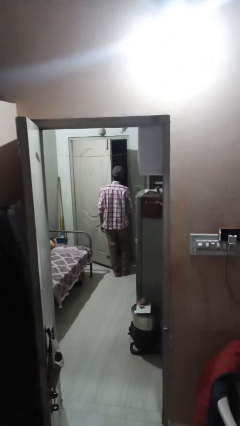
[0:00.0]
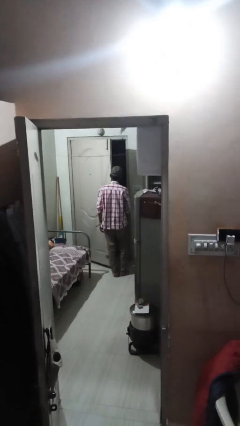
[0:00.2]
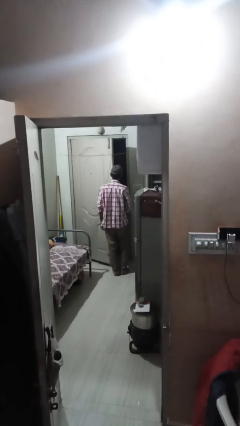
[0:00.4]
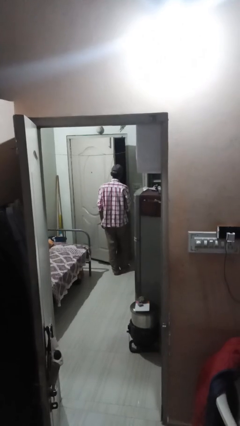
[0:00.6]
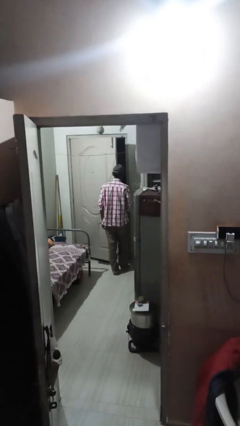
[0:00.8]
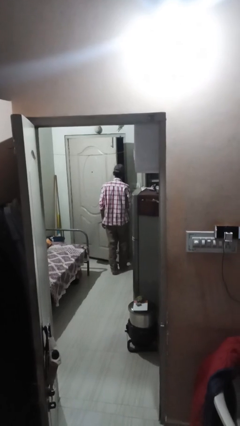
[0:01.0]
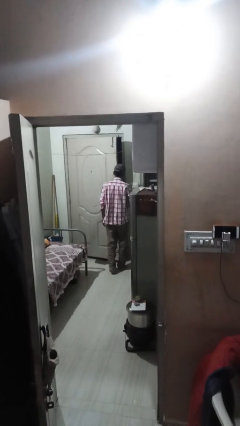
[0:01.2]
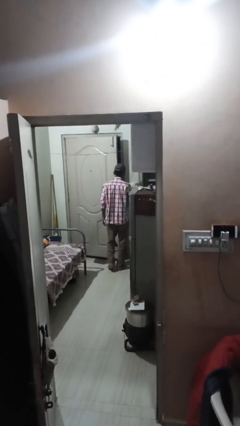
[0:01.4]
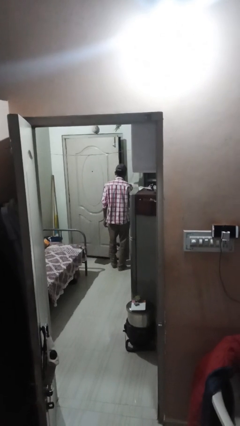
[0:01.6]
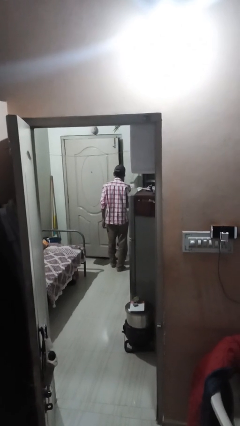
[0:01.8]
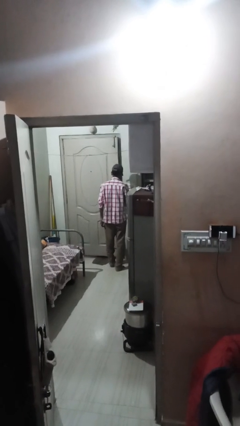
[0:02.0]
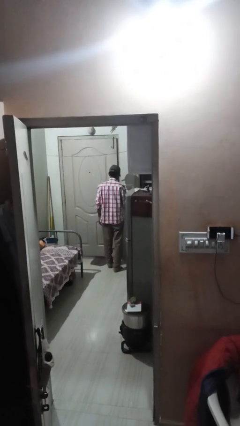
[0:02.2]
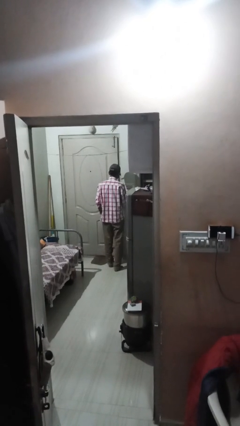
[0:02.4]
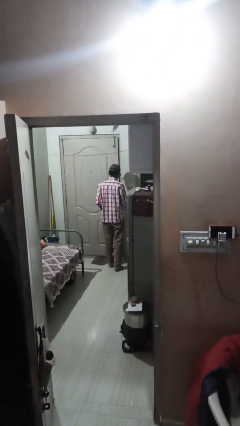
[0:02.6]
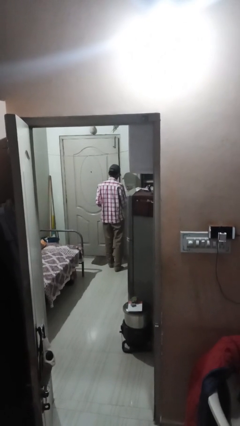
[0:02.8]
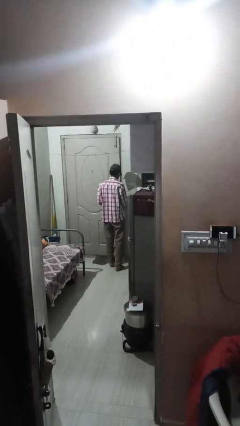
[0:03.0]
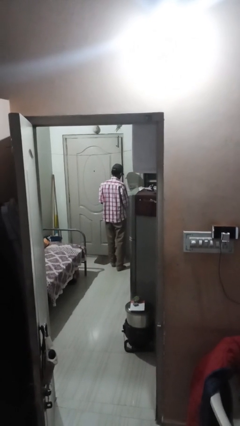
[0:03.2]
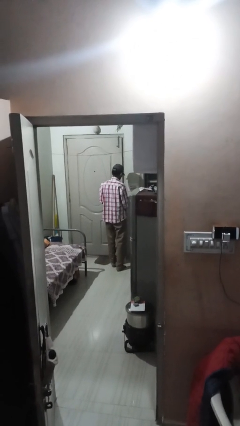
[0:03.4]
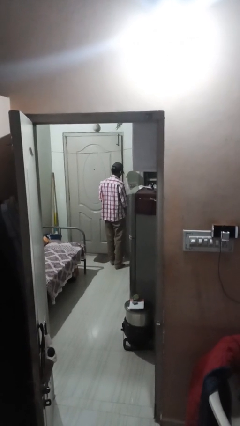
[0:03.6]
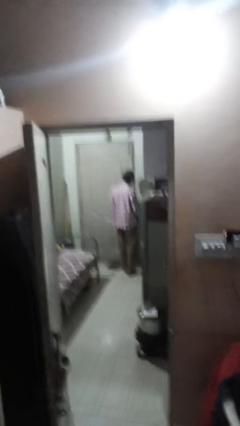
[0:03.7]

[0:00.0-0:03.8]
person closes facility door

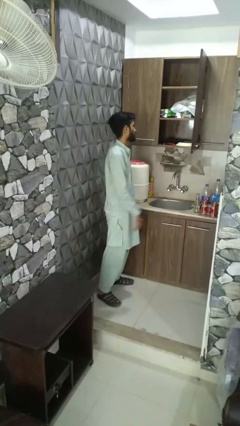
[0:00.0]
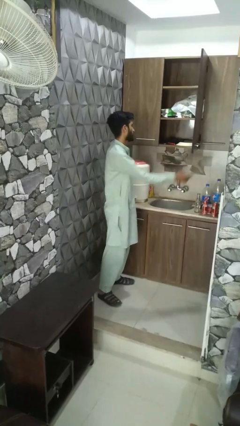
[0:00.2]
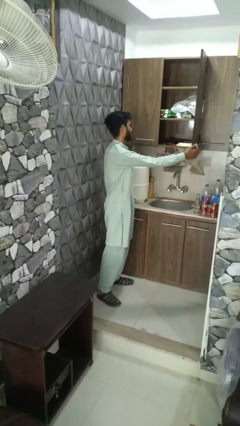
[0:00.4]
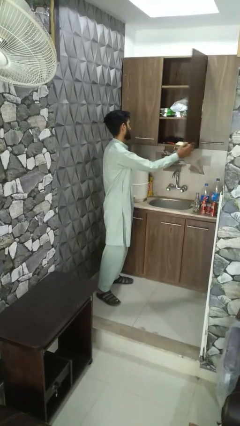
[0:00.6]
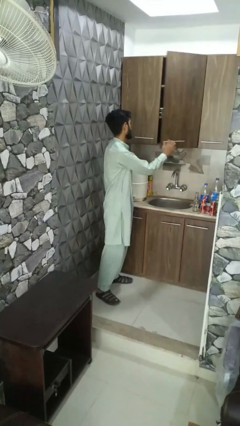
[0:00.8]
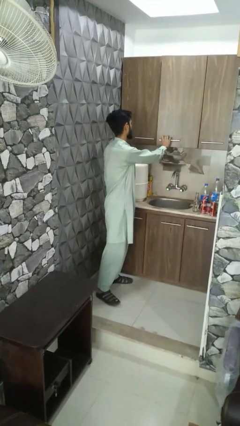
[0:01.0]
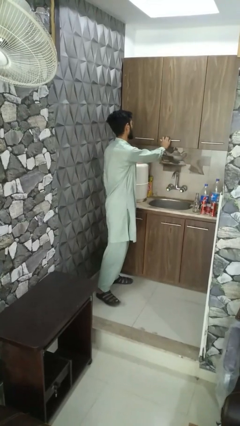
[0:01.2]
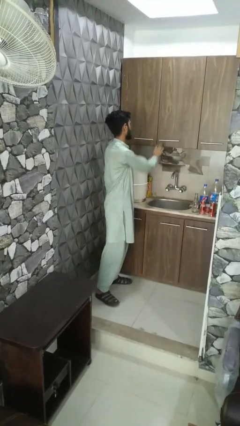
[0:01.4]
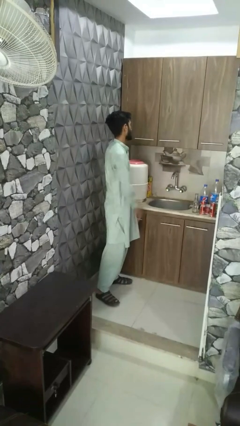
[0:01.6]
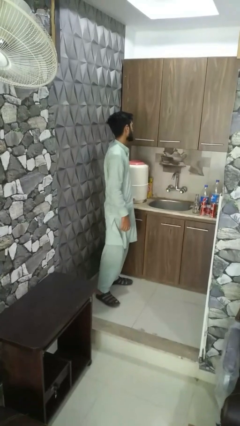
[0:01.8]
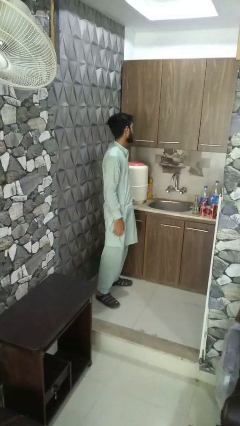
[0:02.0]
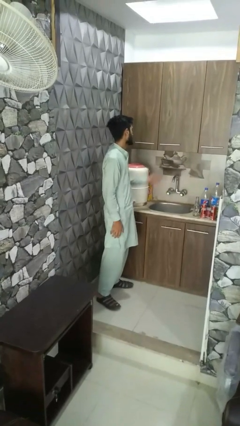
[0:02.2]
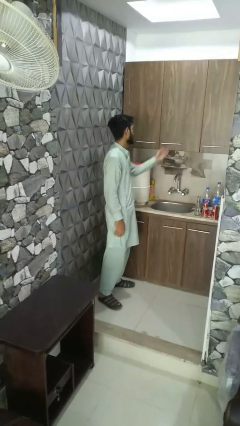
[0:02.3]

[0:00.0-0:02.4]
person closes cabinet

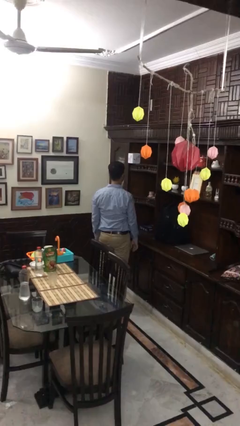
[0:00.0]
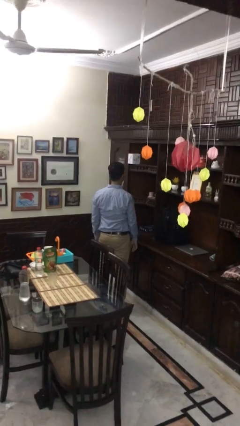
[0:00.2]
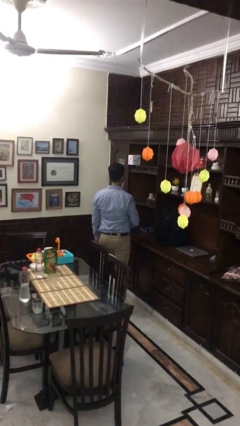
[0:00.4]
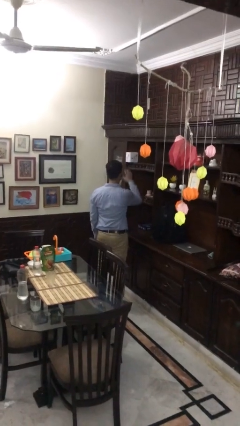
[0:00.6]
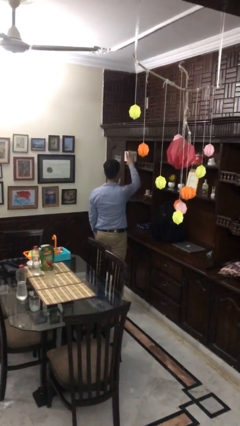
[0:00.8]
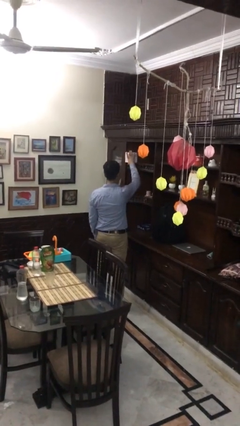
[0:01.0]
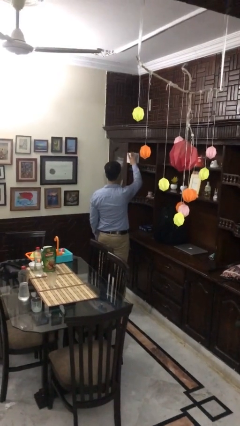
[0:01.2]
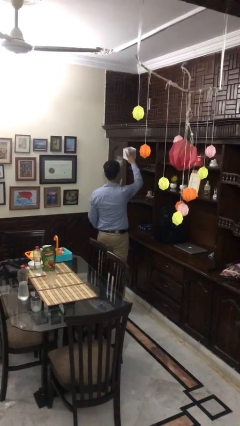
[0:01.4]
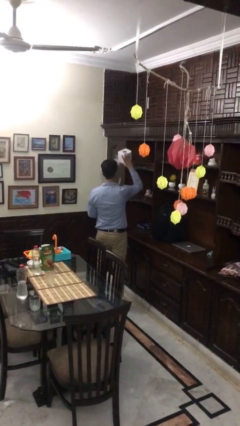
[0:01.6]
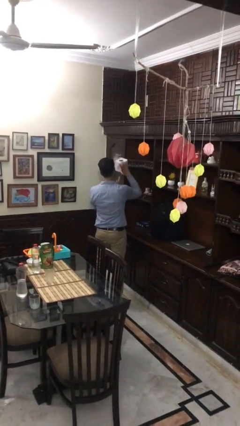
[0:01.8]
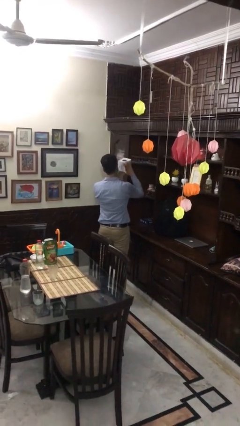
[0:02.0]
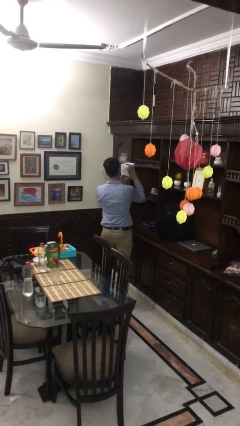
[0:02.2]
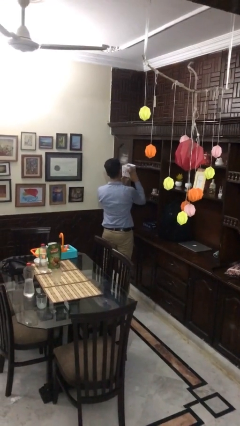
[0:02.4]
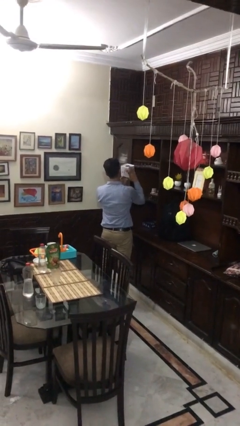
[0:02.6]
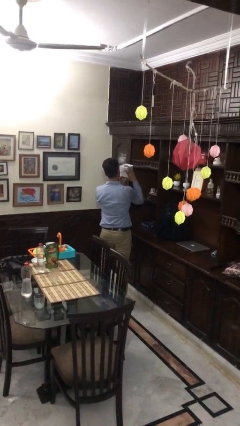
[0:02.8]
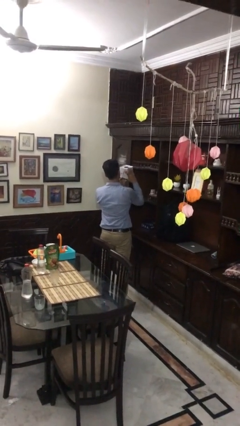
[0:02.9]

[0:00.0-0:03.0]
person picks up object from shelf

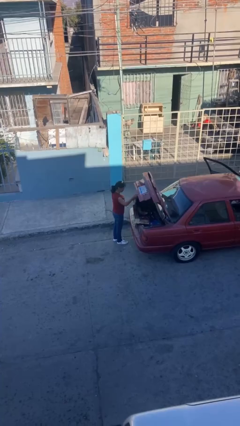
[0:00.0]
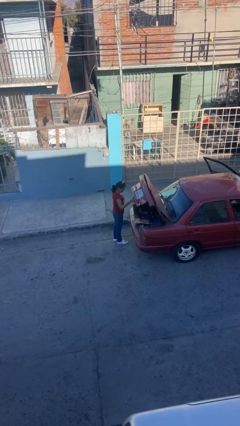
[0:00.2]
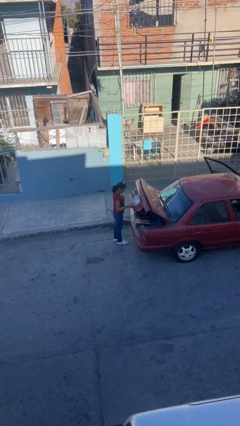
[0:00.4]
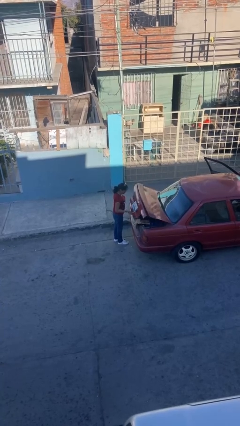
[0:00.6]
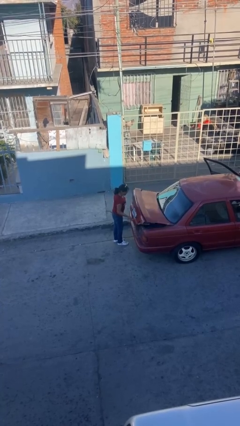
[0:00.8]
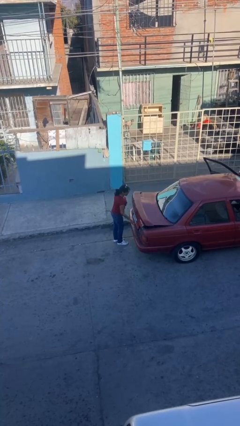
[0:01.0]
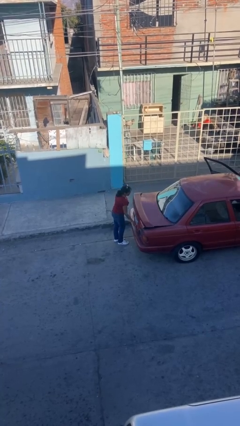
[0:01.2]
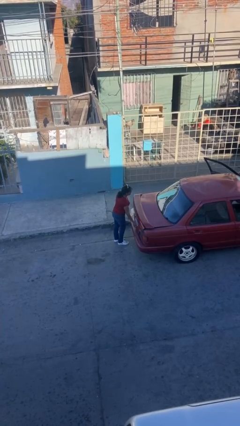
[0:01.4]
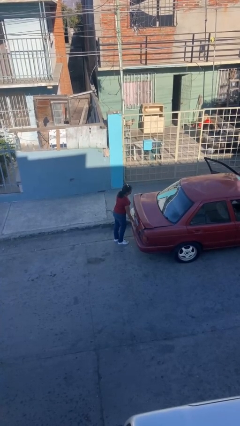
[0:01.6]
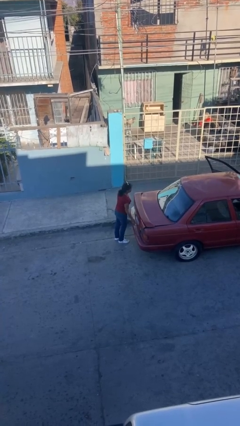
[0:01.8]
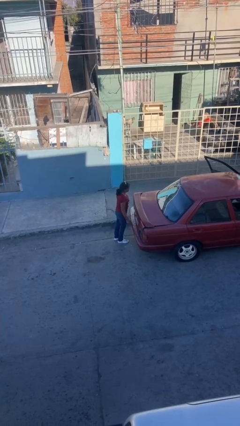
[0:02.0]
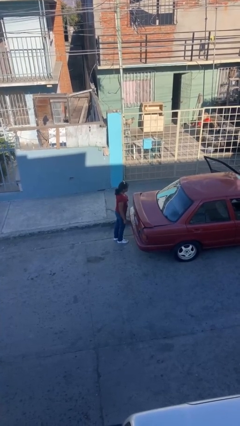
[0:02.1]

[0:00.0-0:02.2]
person closes car trunk

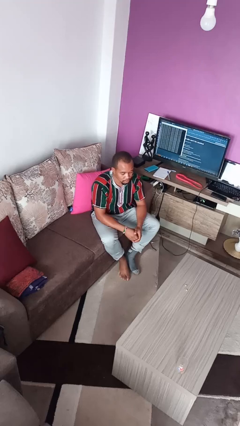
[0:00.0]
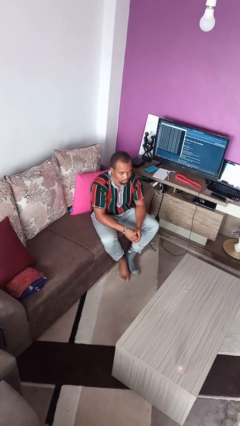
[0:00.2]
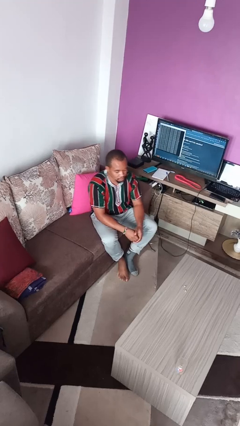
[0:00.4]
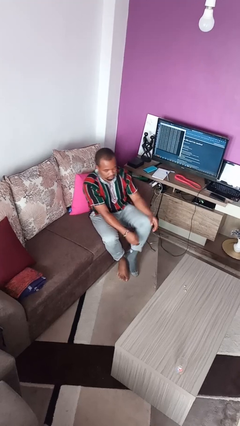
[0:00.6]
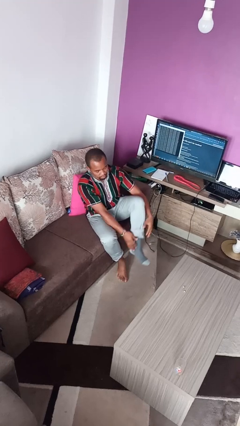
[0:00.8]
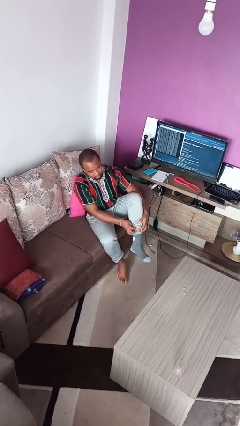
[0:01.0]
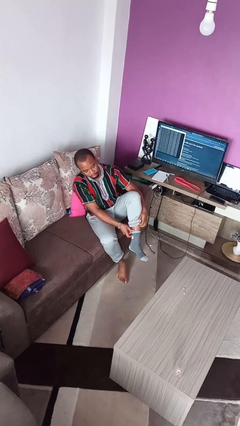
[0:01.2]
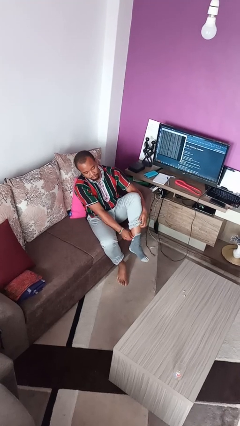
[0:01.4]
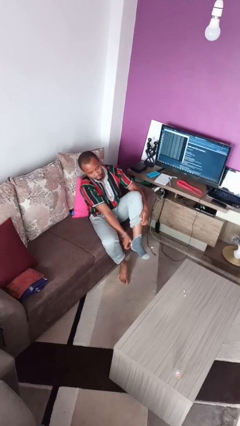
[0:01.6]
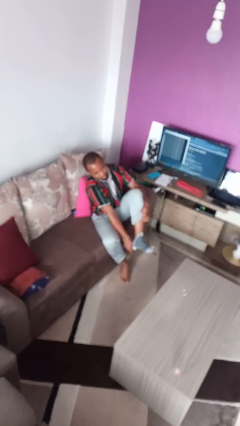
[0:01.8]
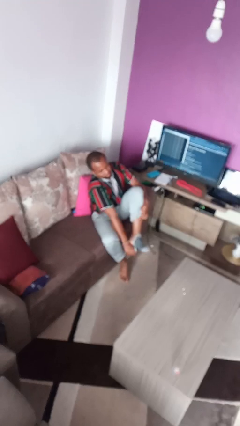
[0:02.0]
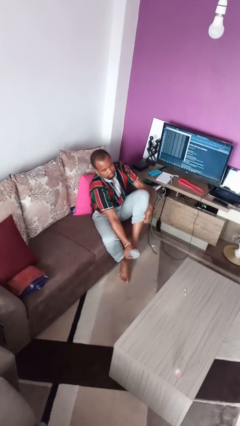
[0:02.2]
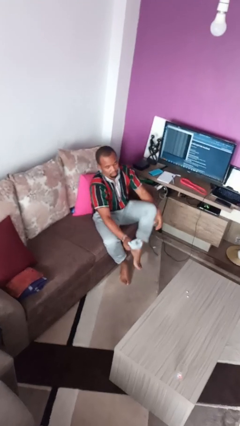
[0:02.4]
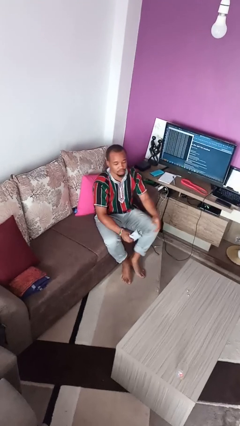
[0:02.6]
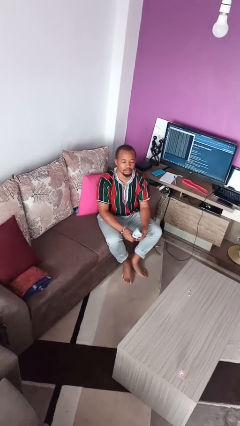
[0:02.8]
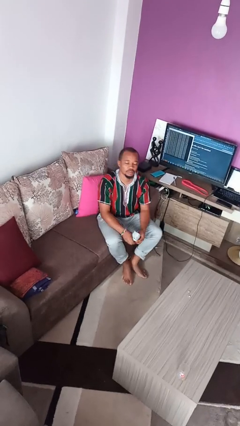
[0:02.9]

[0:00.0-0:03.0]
person takes off socks

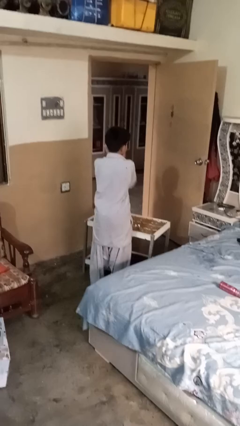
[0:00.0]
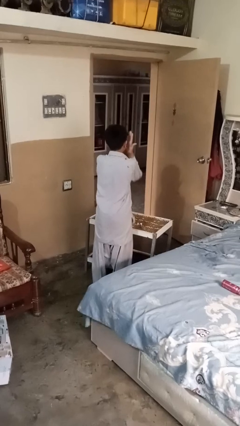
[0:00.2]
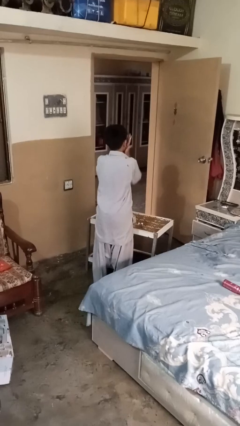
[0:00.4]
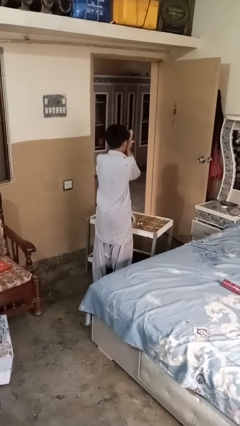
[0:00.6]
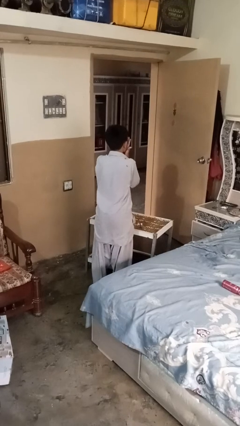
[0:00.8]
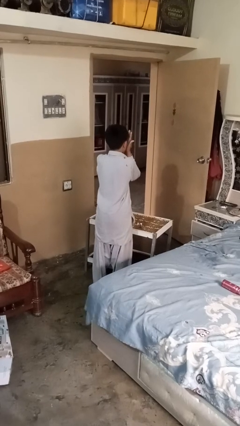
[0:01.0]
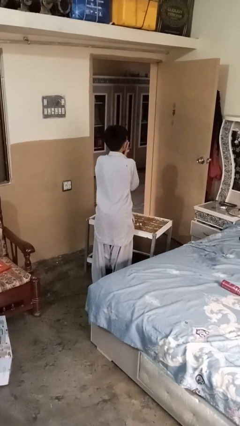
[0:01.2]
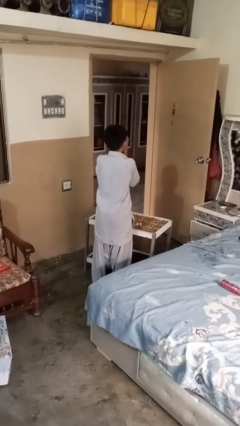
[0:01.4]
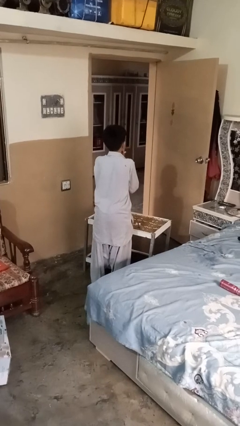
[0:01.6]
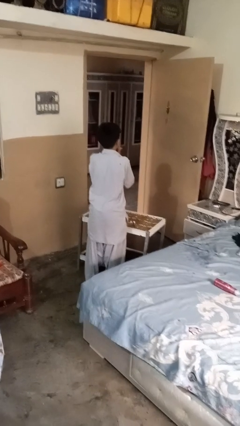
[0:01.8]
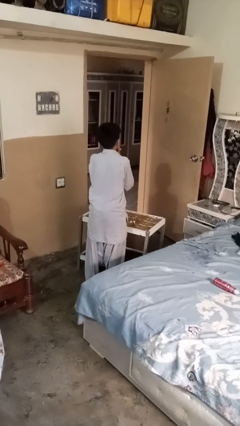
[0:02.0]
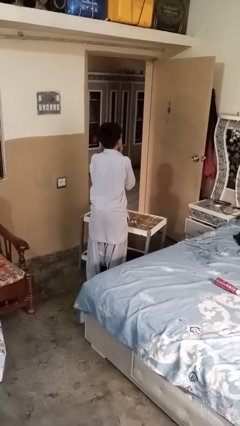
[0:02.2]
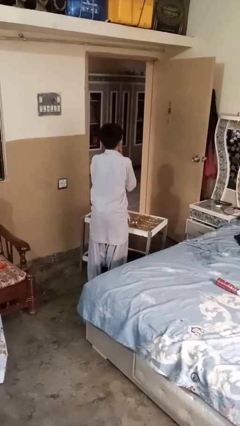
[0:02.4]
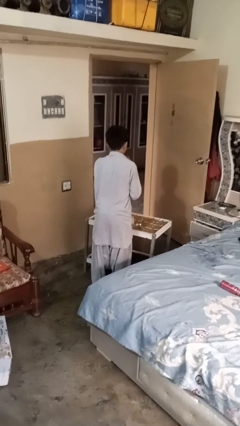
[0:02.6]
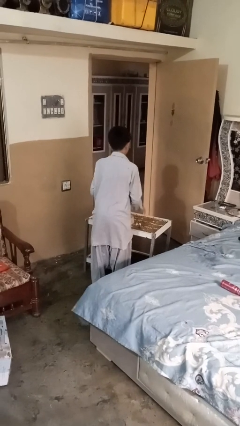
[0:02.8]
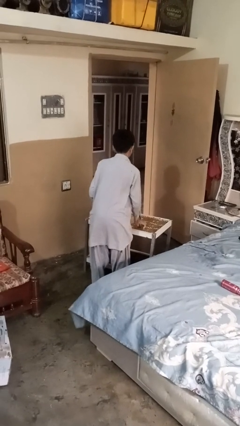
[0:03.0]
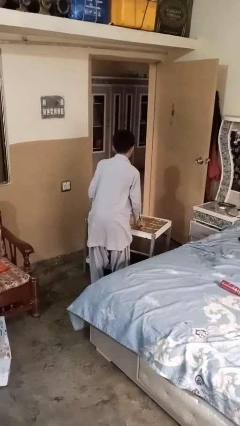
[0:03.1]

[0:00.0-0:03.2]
person applies shaving cream
